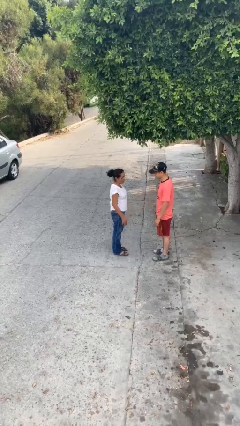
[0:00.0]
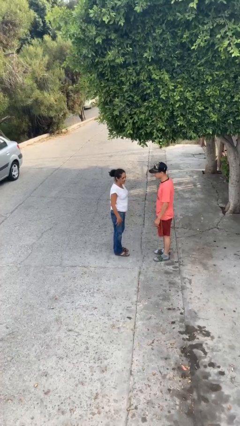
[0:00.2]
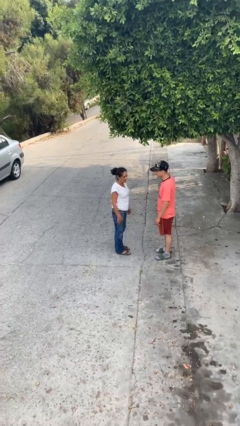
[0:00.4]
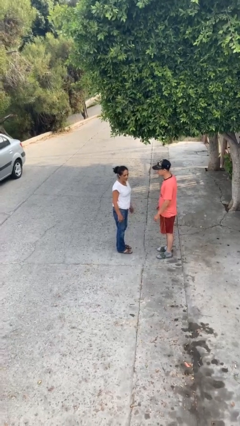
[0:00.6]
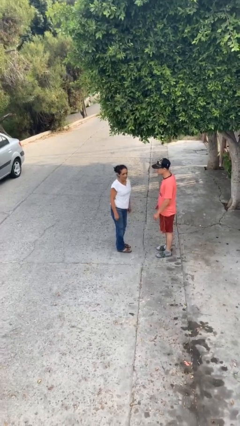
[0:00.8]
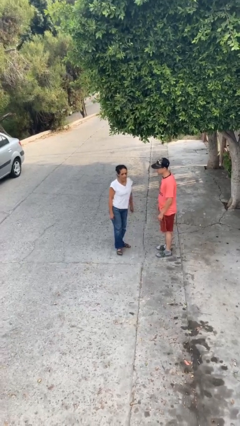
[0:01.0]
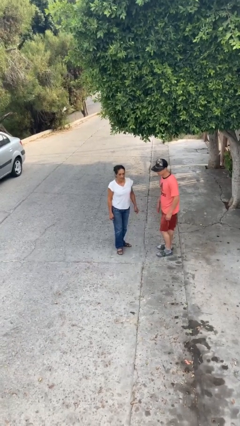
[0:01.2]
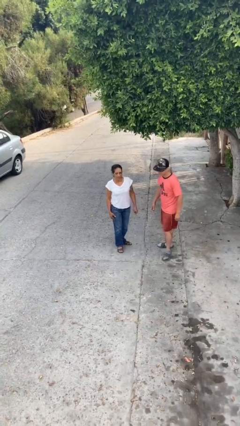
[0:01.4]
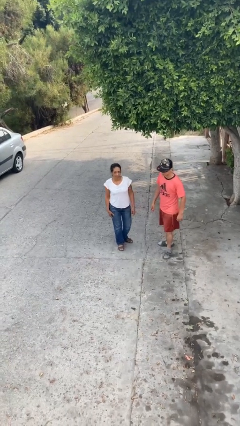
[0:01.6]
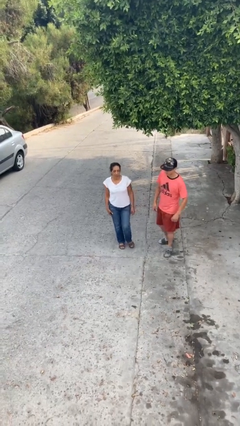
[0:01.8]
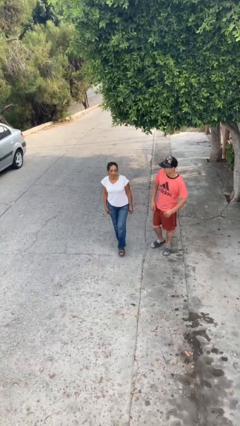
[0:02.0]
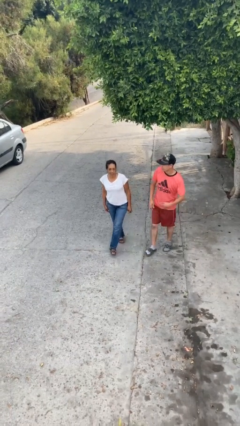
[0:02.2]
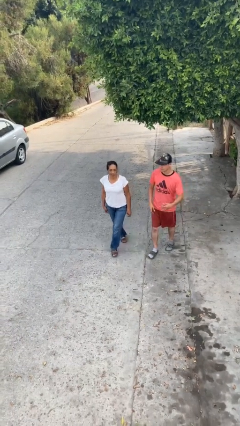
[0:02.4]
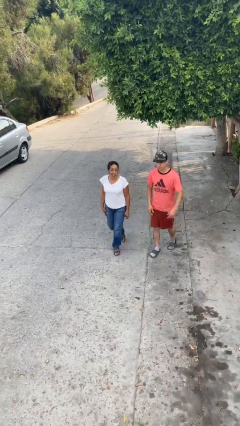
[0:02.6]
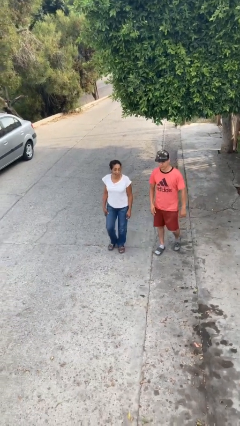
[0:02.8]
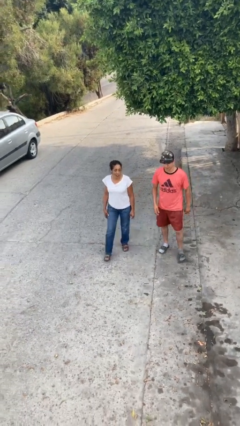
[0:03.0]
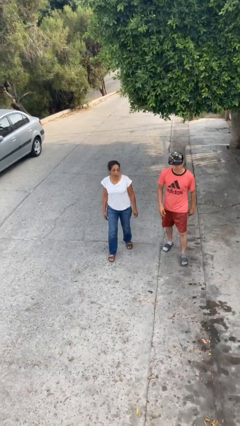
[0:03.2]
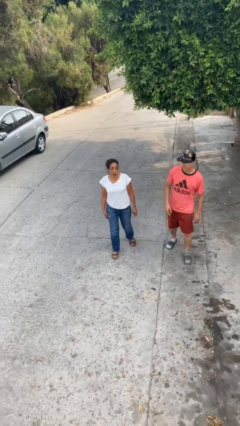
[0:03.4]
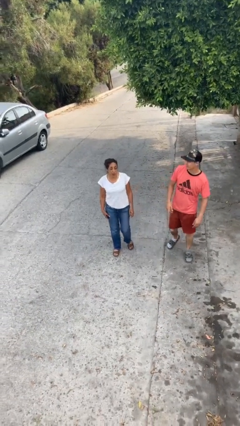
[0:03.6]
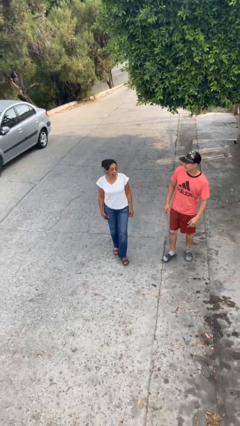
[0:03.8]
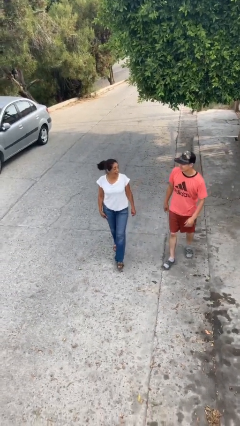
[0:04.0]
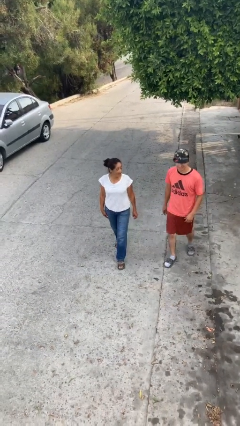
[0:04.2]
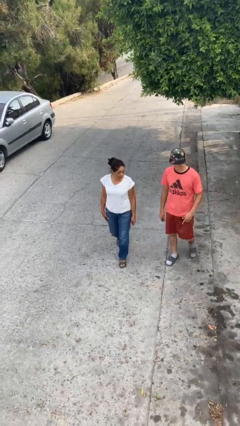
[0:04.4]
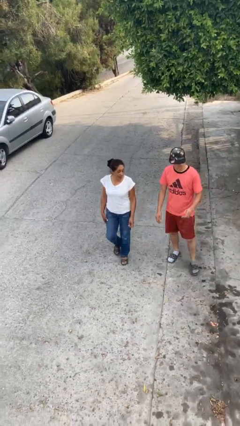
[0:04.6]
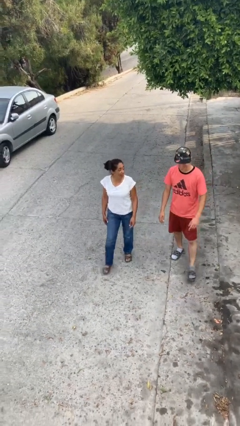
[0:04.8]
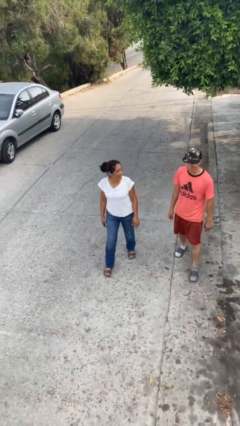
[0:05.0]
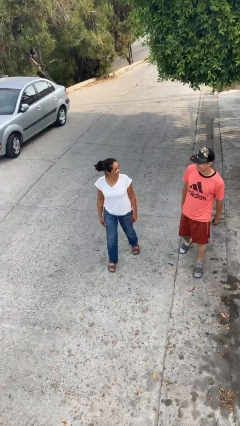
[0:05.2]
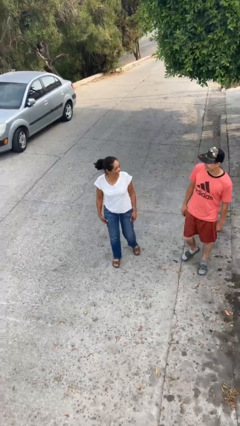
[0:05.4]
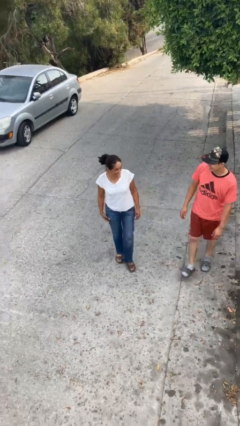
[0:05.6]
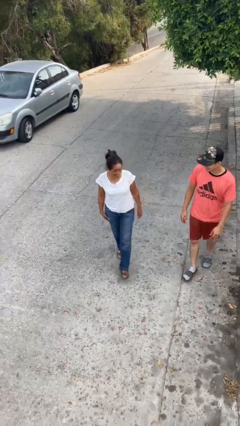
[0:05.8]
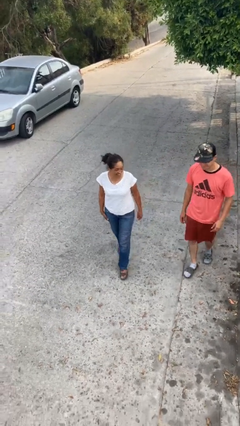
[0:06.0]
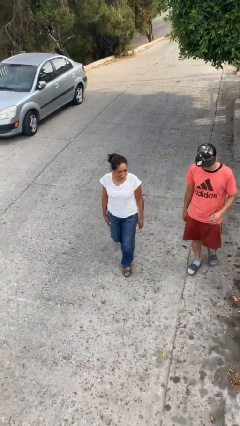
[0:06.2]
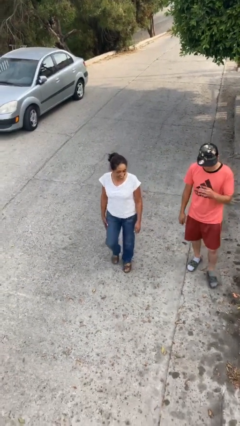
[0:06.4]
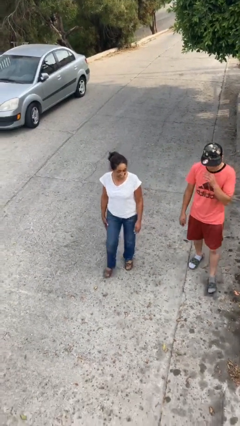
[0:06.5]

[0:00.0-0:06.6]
person talks to person

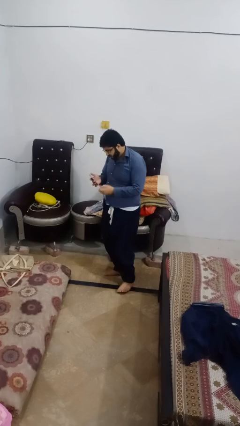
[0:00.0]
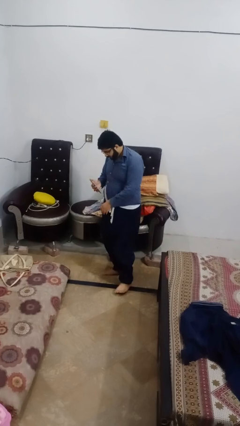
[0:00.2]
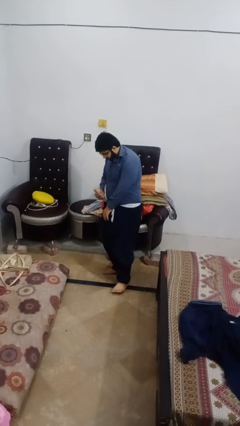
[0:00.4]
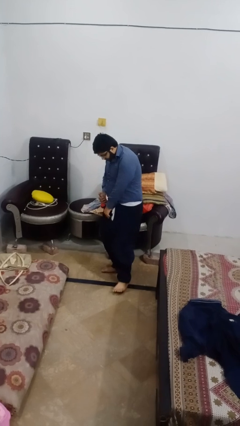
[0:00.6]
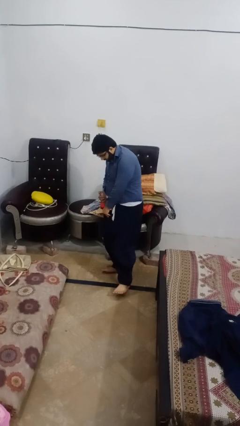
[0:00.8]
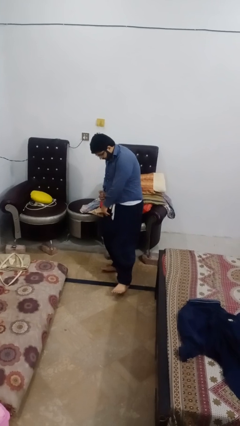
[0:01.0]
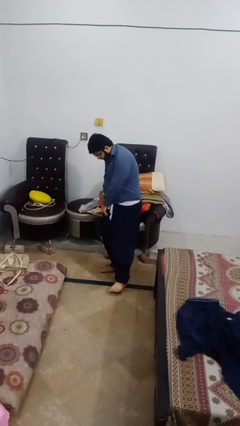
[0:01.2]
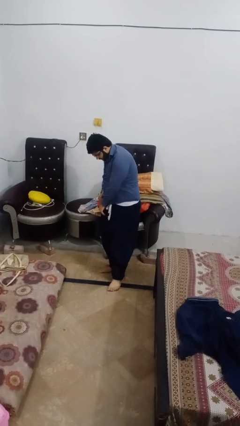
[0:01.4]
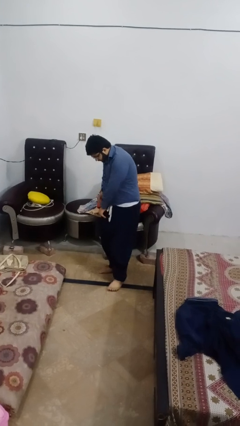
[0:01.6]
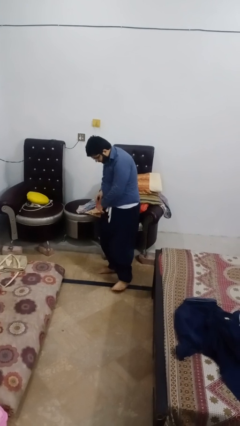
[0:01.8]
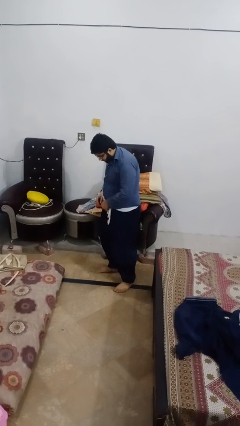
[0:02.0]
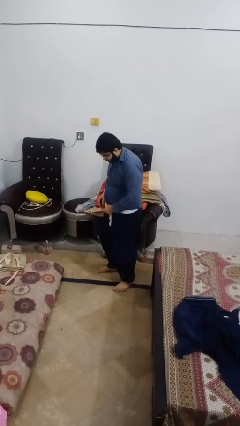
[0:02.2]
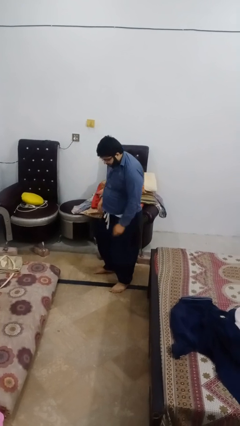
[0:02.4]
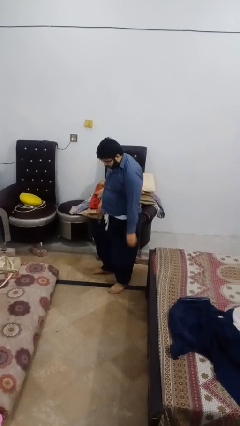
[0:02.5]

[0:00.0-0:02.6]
person puts phone into pocket

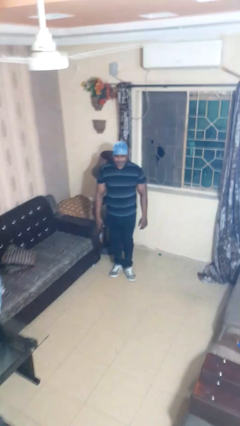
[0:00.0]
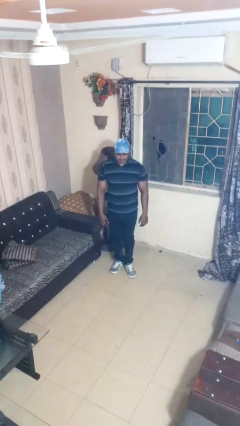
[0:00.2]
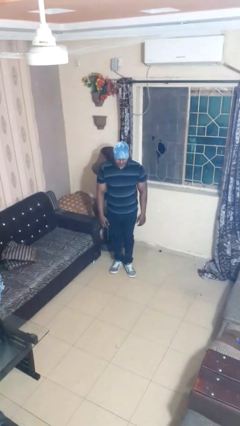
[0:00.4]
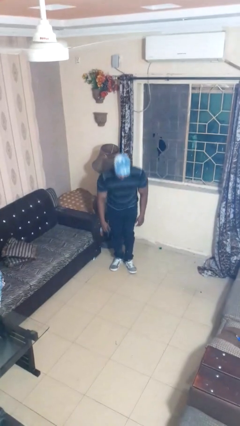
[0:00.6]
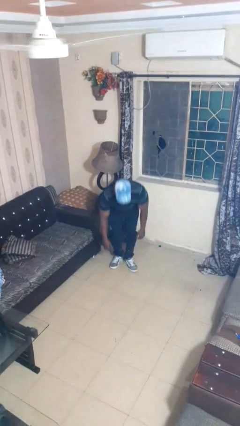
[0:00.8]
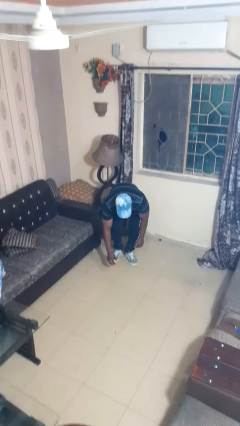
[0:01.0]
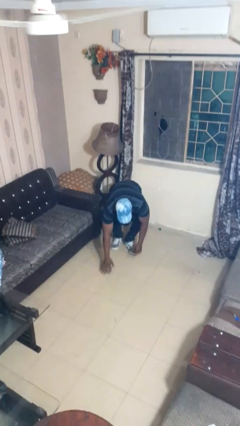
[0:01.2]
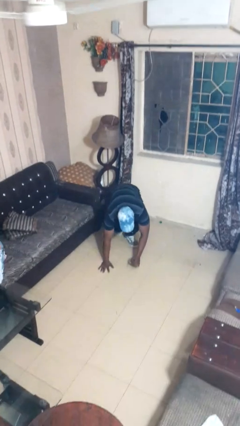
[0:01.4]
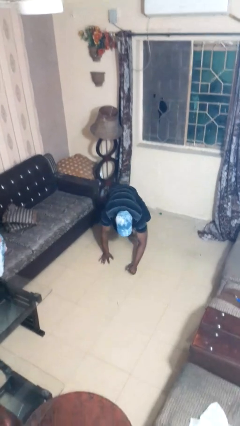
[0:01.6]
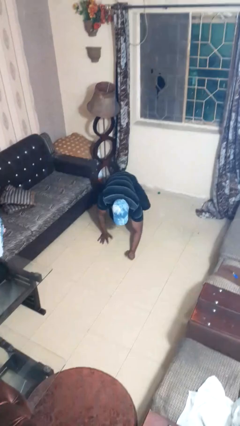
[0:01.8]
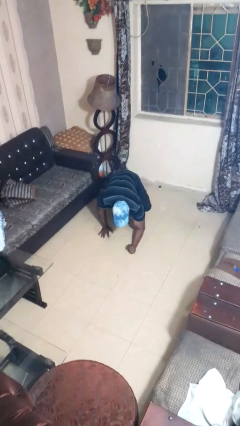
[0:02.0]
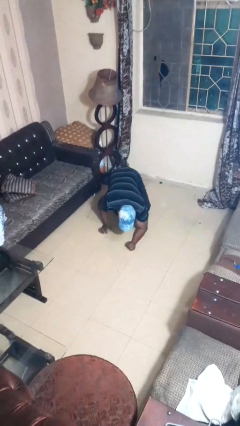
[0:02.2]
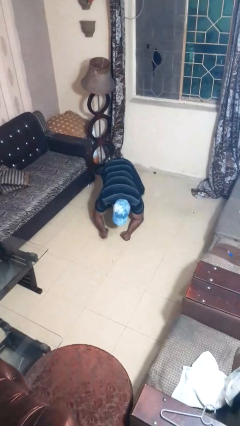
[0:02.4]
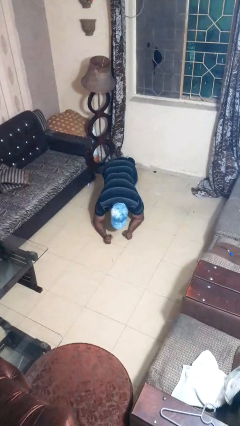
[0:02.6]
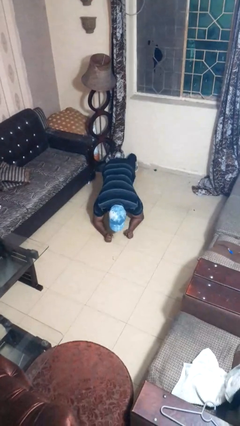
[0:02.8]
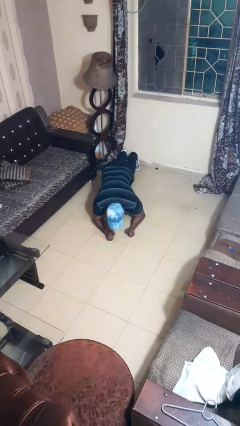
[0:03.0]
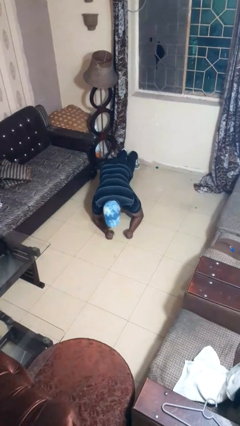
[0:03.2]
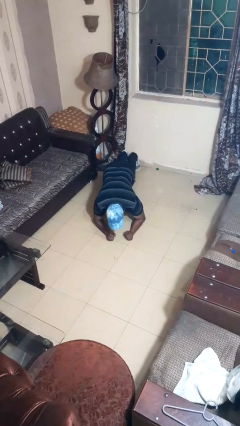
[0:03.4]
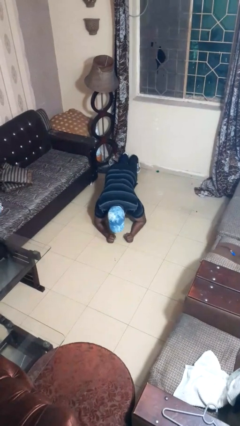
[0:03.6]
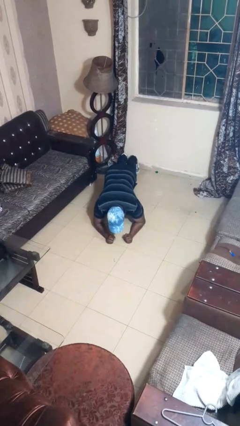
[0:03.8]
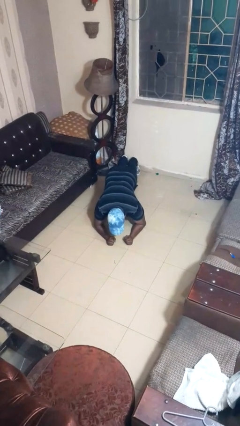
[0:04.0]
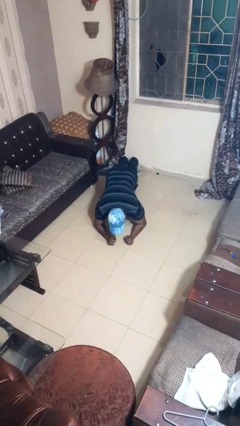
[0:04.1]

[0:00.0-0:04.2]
person exercises with plank

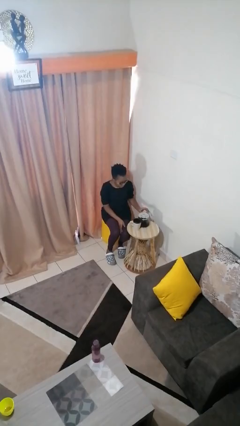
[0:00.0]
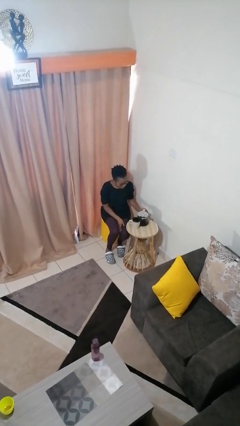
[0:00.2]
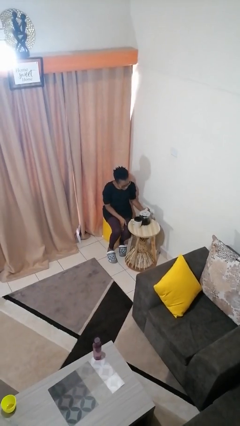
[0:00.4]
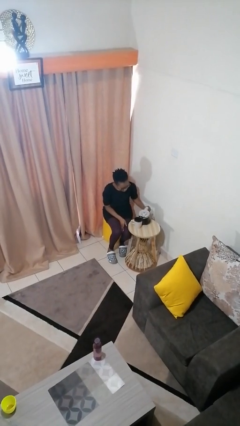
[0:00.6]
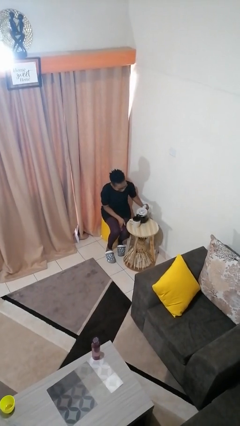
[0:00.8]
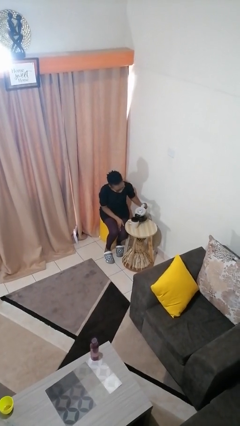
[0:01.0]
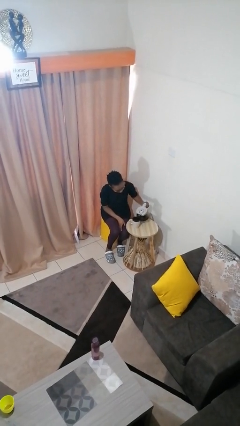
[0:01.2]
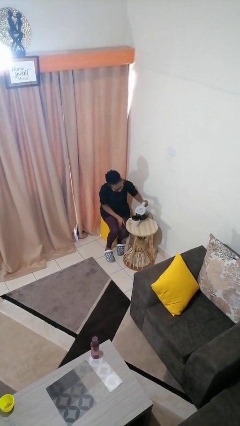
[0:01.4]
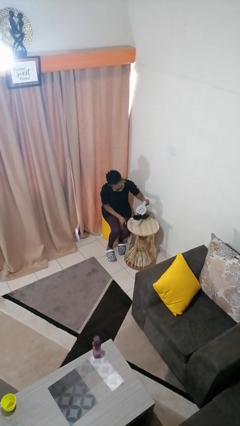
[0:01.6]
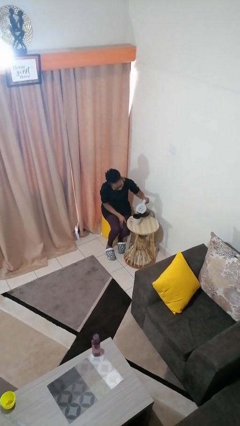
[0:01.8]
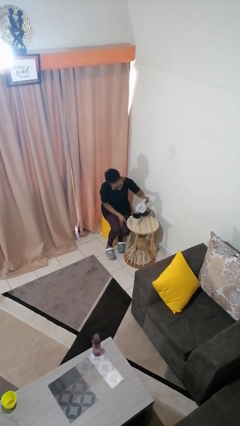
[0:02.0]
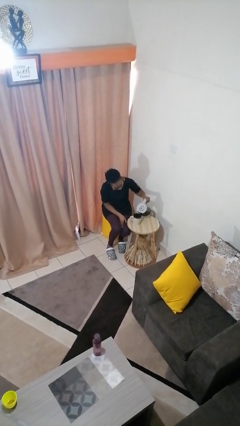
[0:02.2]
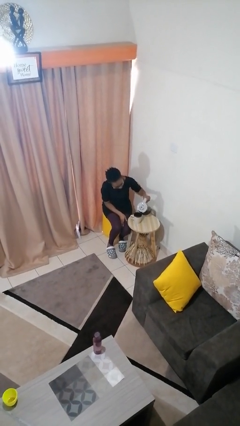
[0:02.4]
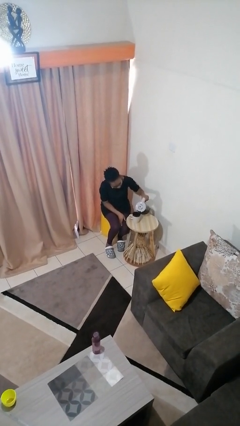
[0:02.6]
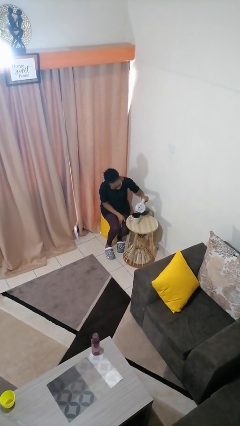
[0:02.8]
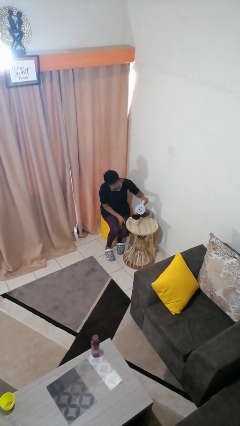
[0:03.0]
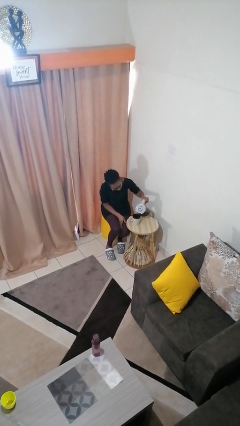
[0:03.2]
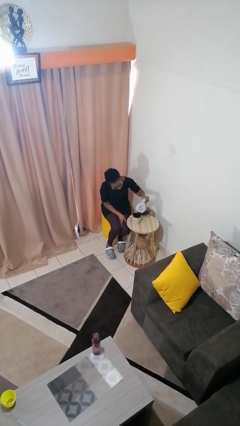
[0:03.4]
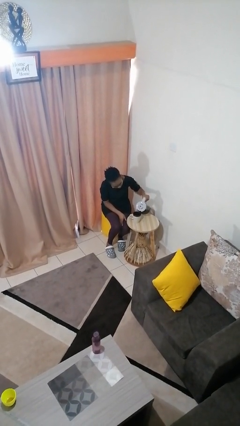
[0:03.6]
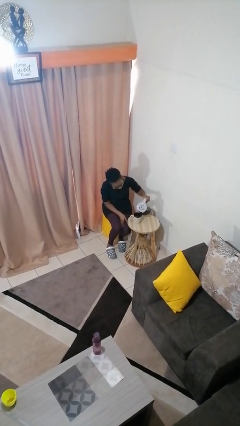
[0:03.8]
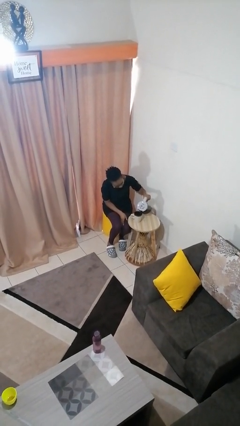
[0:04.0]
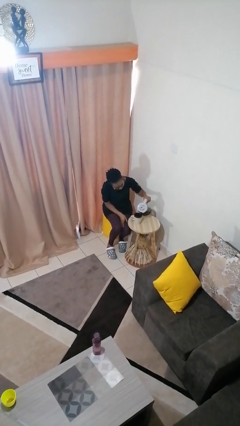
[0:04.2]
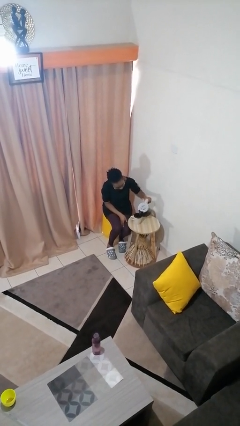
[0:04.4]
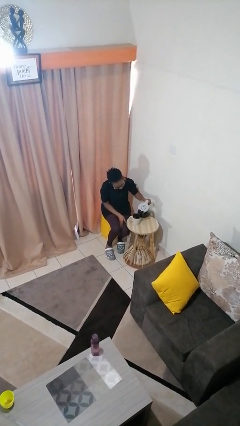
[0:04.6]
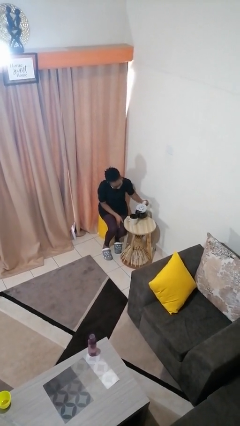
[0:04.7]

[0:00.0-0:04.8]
person pours coffee into mug
